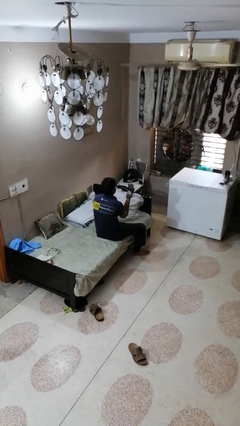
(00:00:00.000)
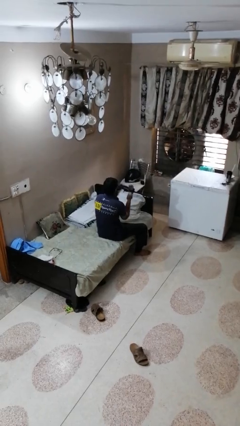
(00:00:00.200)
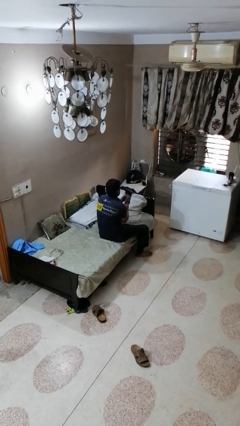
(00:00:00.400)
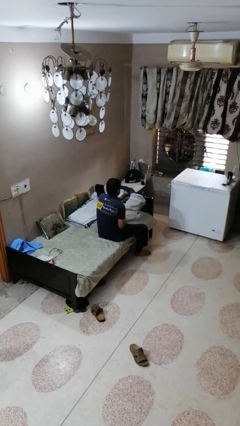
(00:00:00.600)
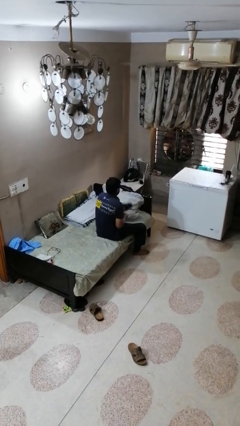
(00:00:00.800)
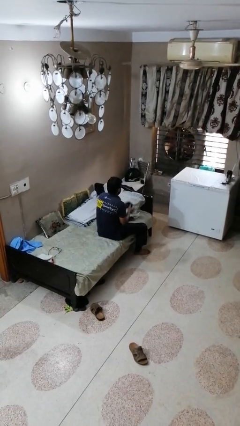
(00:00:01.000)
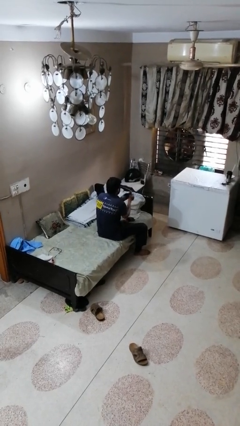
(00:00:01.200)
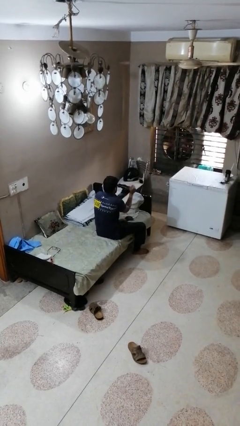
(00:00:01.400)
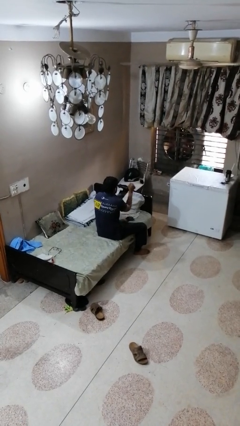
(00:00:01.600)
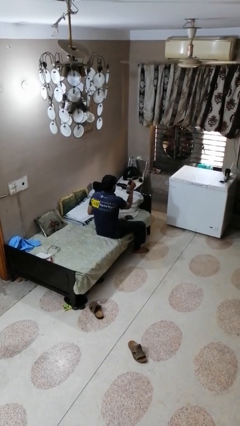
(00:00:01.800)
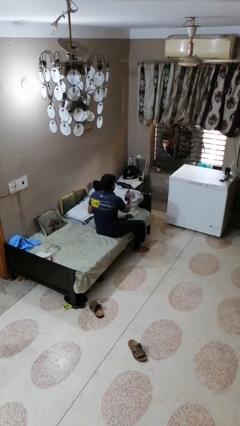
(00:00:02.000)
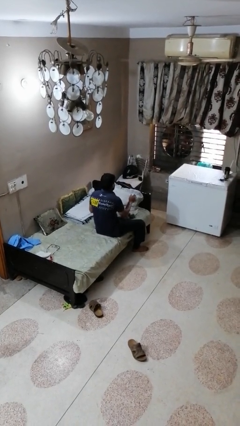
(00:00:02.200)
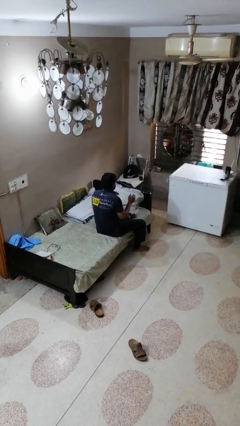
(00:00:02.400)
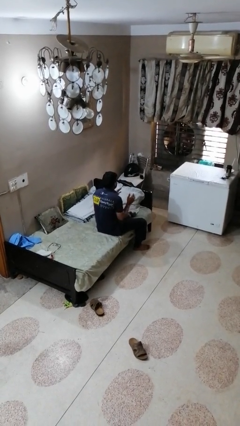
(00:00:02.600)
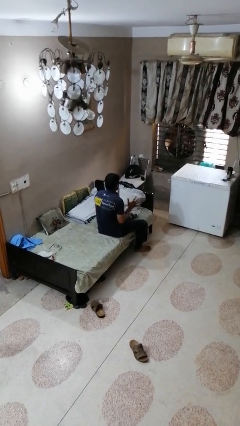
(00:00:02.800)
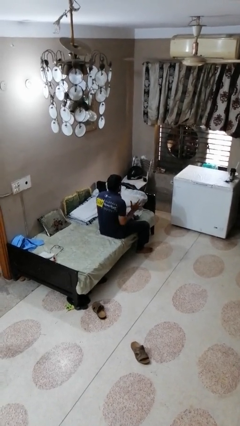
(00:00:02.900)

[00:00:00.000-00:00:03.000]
person takes off gloves

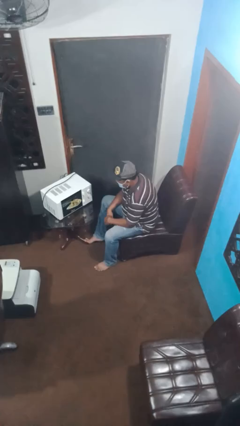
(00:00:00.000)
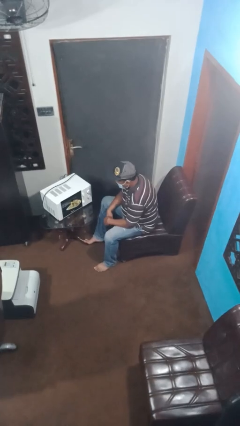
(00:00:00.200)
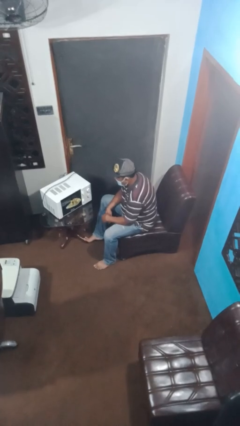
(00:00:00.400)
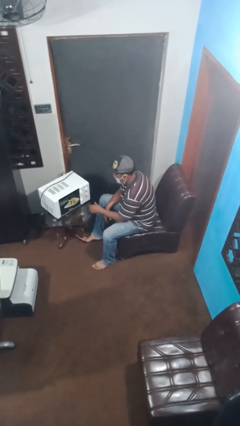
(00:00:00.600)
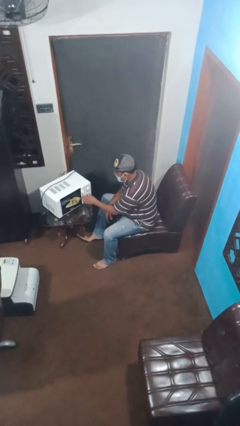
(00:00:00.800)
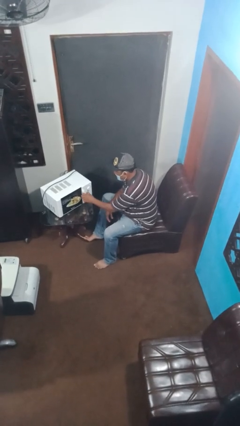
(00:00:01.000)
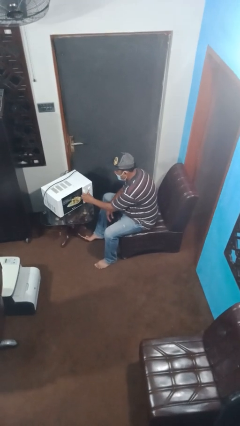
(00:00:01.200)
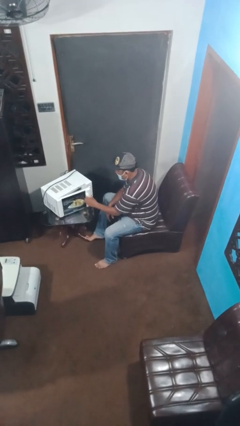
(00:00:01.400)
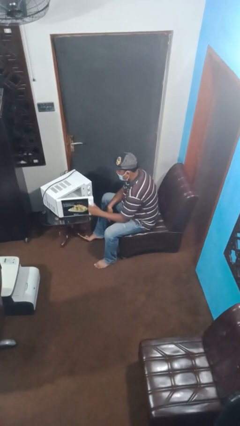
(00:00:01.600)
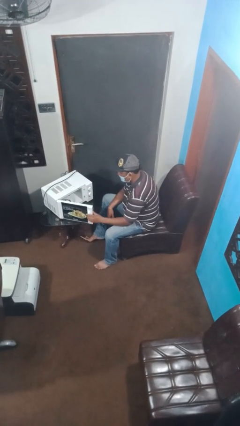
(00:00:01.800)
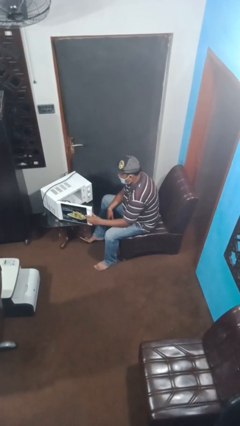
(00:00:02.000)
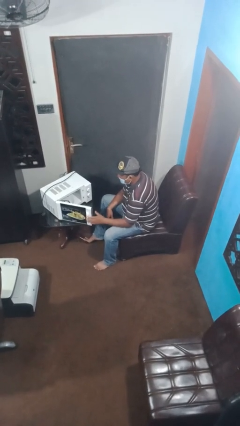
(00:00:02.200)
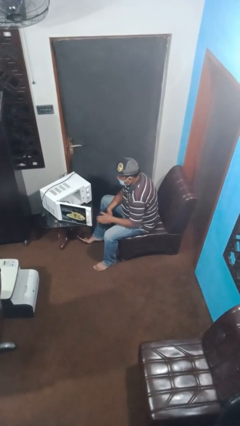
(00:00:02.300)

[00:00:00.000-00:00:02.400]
person opens microwave

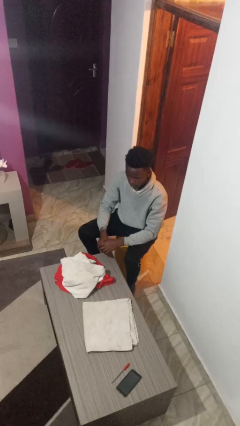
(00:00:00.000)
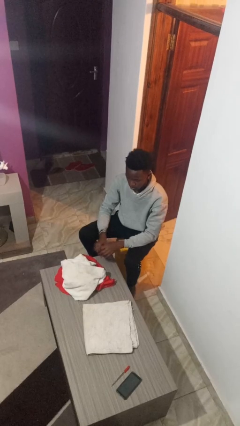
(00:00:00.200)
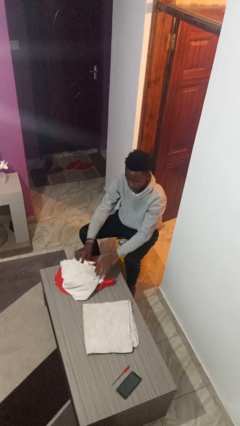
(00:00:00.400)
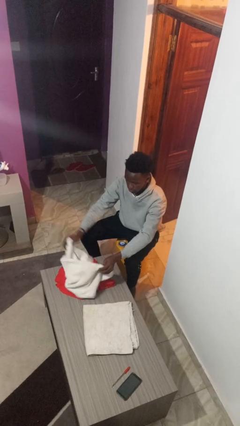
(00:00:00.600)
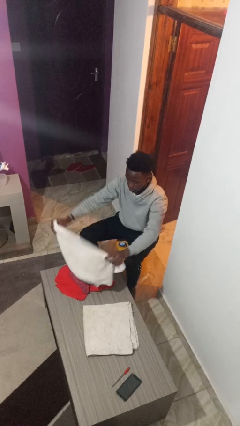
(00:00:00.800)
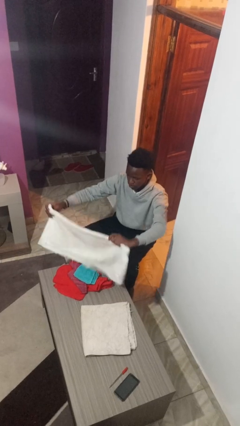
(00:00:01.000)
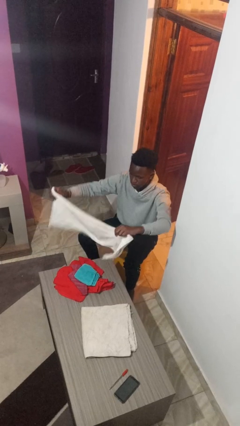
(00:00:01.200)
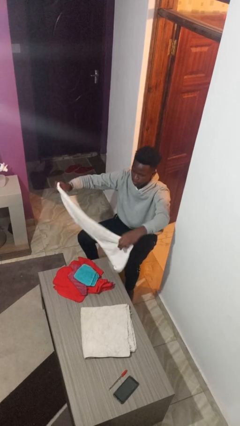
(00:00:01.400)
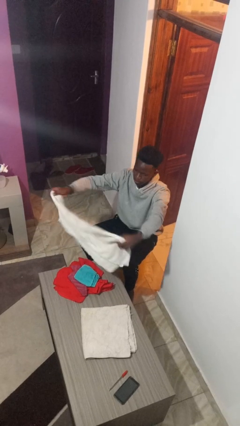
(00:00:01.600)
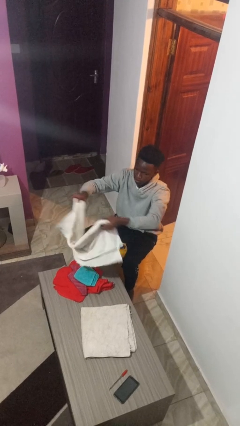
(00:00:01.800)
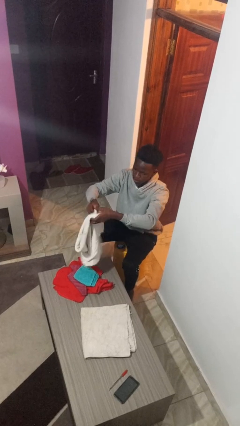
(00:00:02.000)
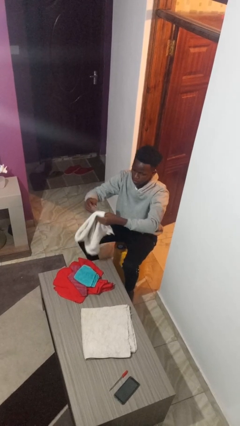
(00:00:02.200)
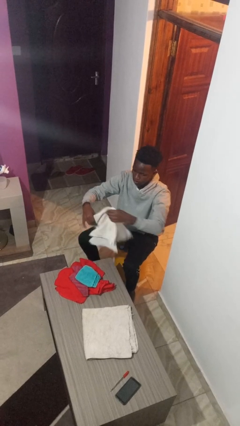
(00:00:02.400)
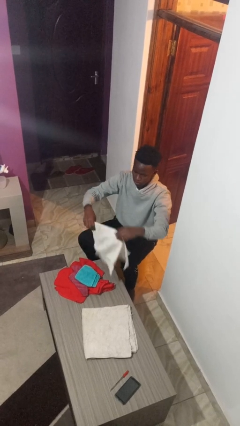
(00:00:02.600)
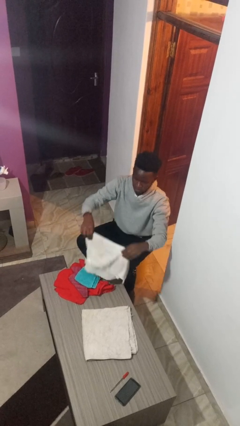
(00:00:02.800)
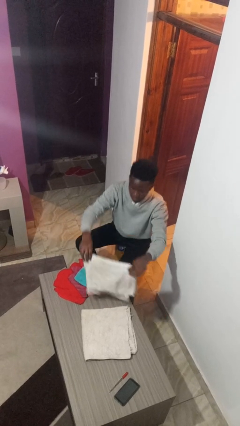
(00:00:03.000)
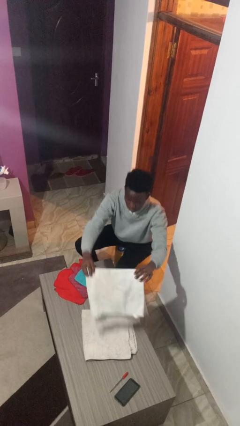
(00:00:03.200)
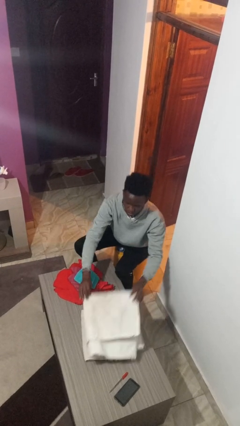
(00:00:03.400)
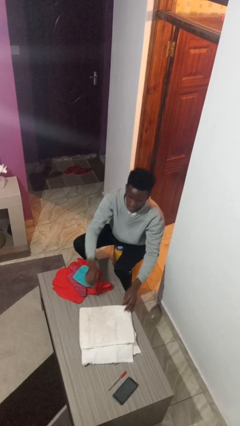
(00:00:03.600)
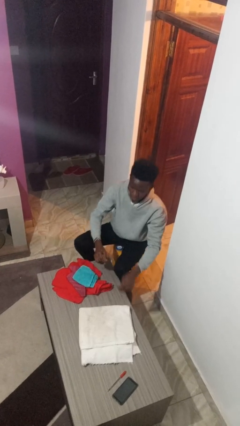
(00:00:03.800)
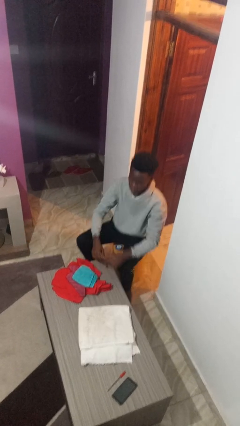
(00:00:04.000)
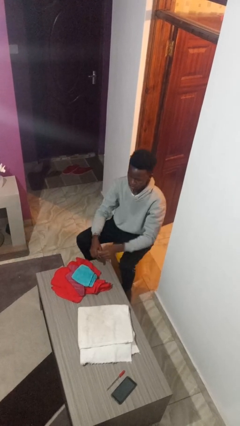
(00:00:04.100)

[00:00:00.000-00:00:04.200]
person folds towel

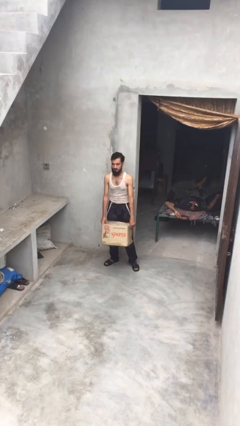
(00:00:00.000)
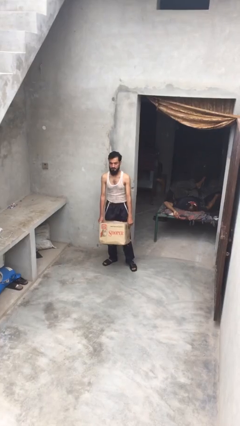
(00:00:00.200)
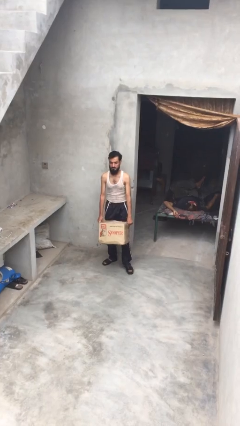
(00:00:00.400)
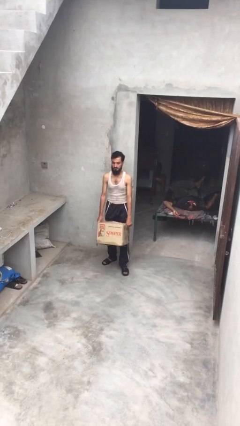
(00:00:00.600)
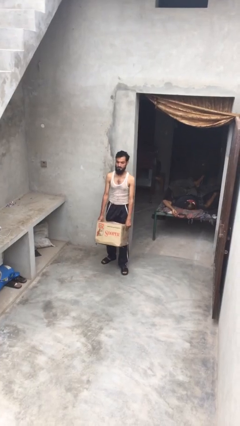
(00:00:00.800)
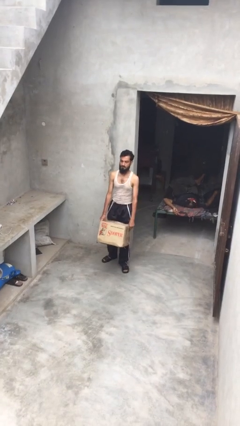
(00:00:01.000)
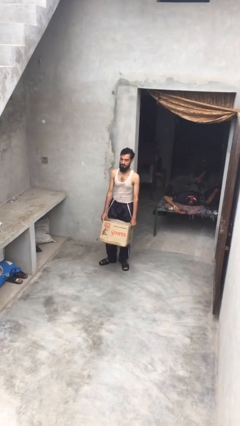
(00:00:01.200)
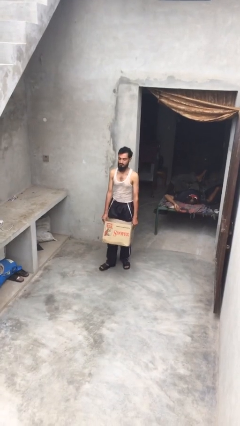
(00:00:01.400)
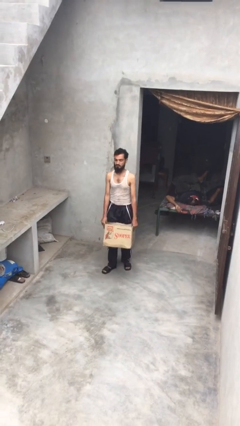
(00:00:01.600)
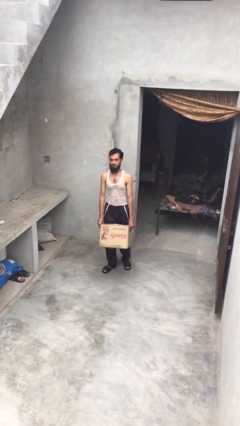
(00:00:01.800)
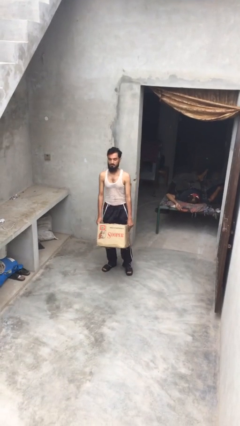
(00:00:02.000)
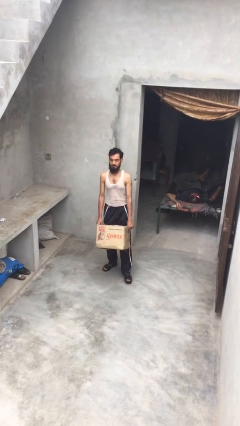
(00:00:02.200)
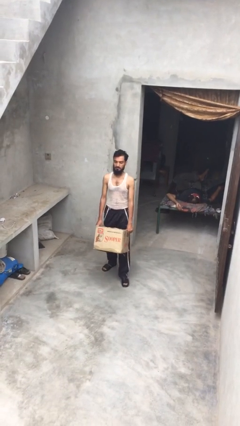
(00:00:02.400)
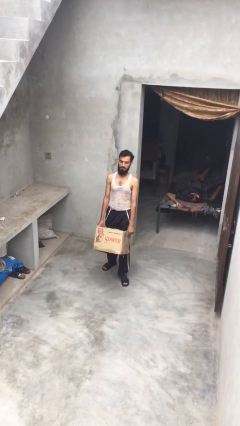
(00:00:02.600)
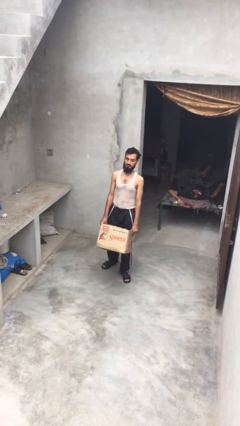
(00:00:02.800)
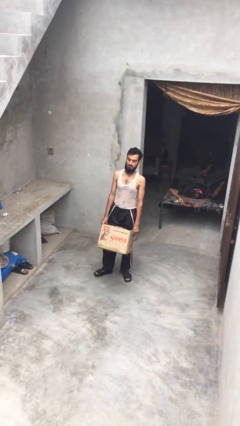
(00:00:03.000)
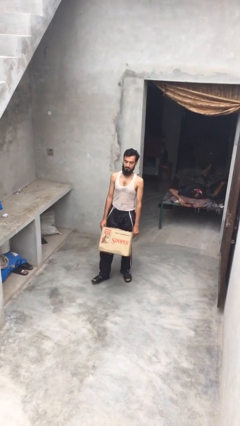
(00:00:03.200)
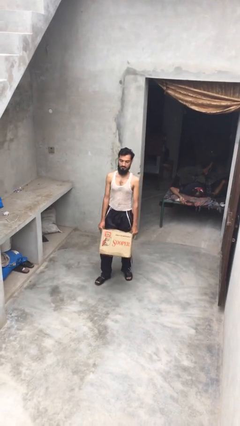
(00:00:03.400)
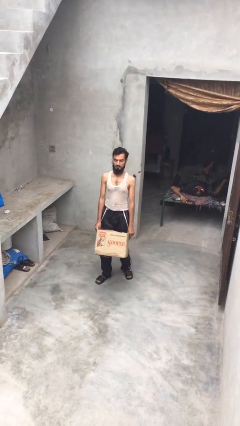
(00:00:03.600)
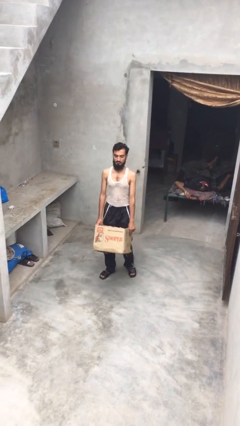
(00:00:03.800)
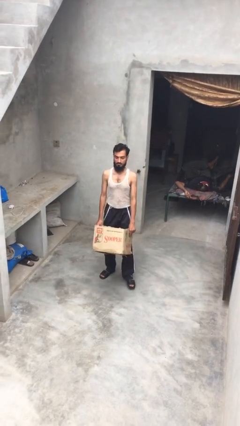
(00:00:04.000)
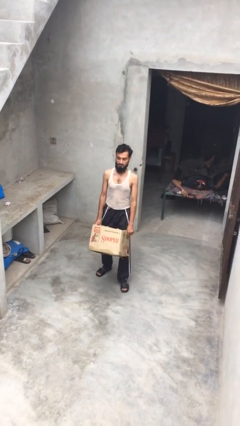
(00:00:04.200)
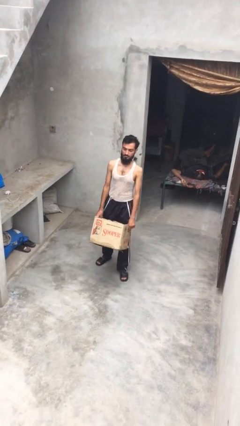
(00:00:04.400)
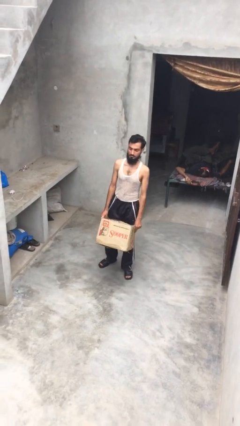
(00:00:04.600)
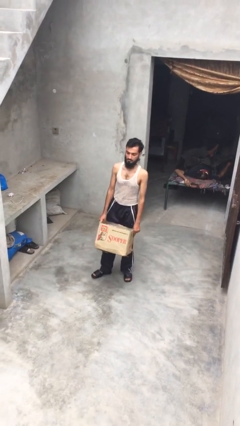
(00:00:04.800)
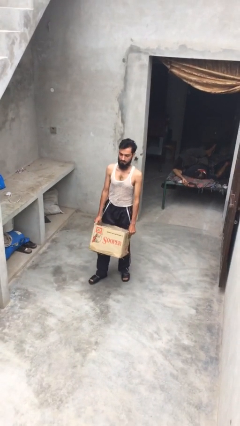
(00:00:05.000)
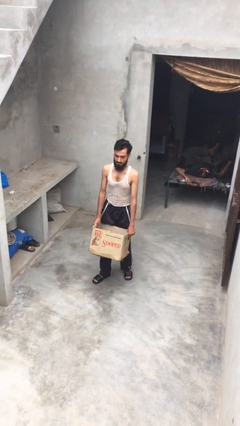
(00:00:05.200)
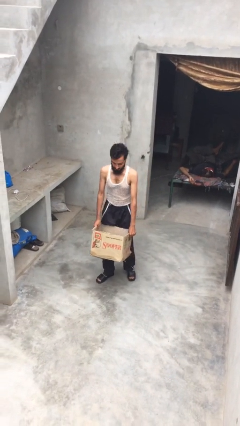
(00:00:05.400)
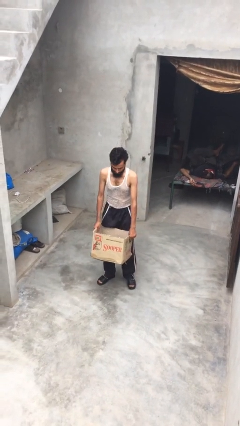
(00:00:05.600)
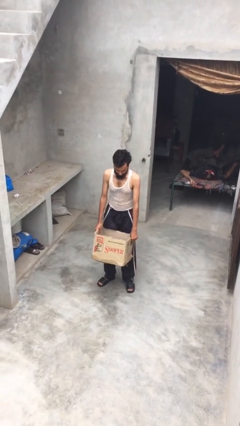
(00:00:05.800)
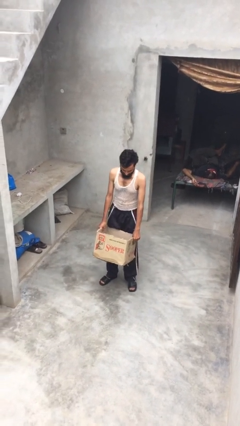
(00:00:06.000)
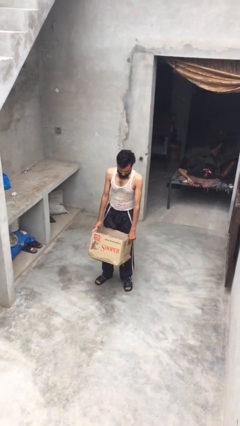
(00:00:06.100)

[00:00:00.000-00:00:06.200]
person carries heavy object

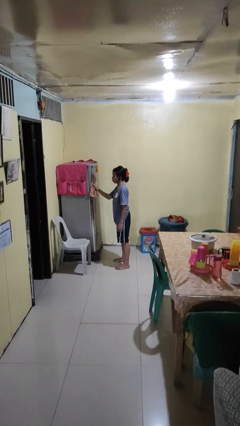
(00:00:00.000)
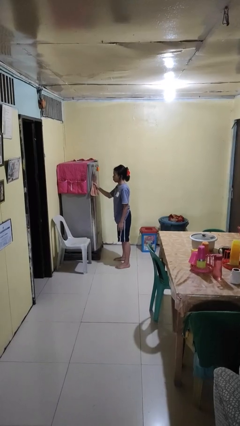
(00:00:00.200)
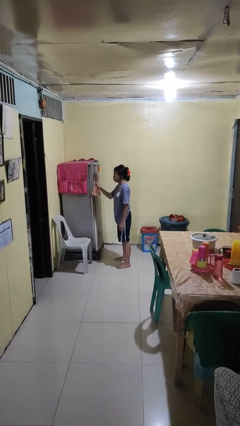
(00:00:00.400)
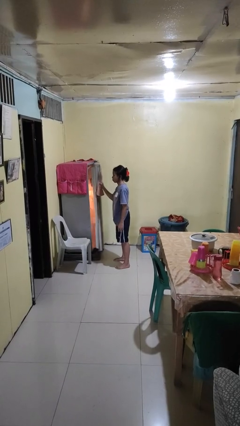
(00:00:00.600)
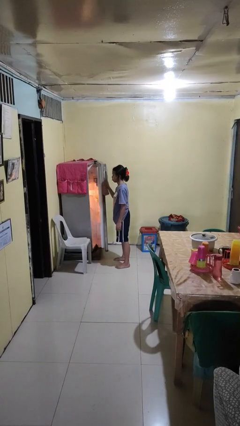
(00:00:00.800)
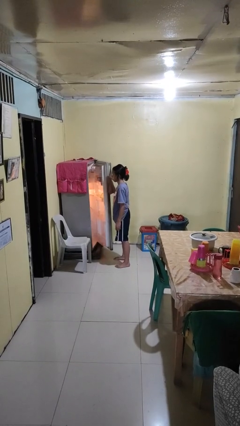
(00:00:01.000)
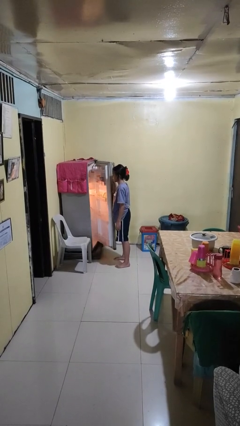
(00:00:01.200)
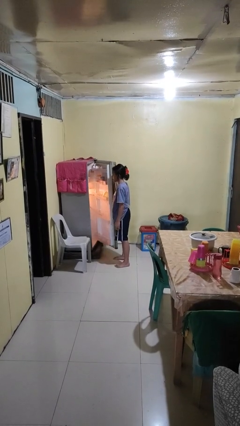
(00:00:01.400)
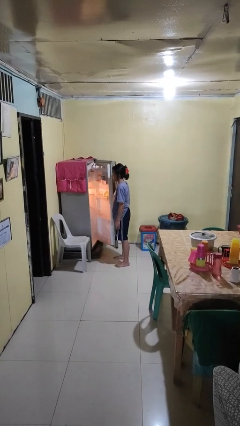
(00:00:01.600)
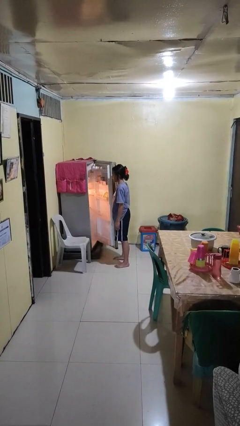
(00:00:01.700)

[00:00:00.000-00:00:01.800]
person opens refrigerator
